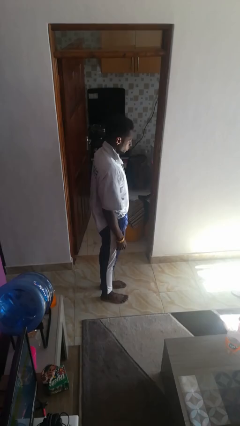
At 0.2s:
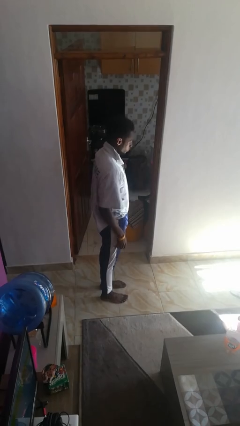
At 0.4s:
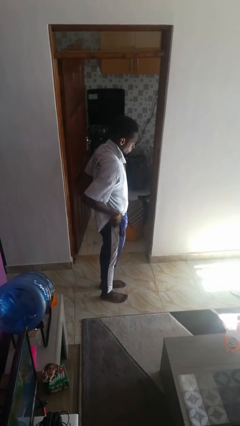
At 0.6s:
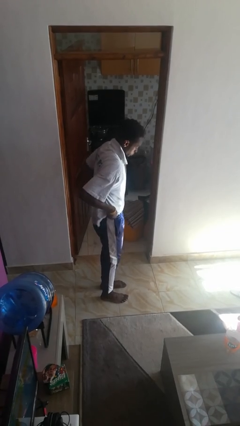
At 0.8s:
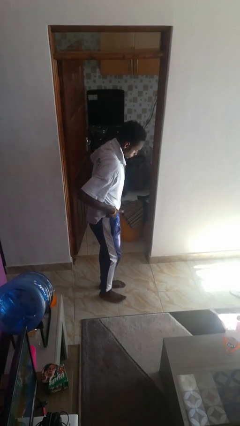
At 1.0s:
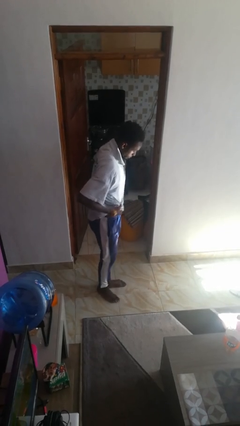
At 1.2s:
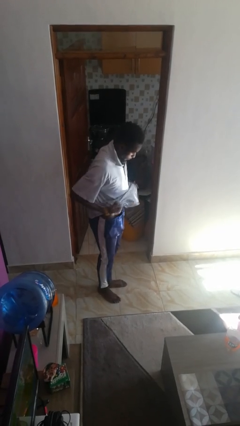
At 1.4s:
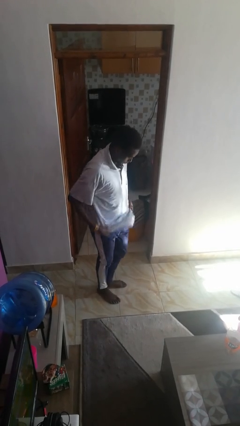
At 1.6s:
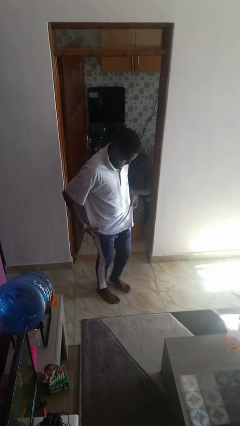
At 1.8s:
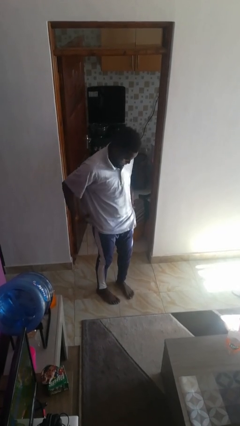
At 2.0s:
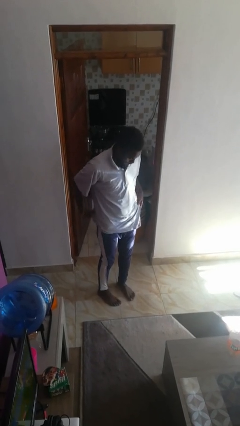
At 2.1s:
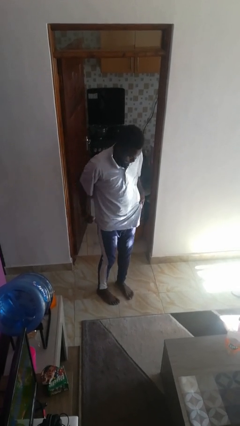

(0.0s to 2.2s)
person untucks shirt

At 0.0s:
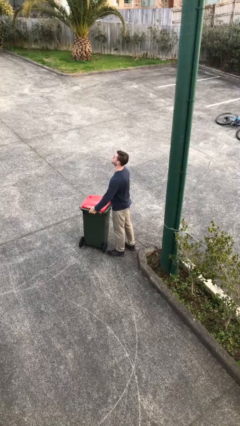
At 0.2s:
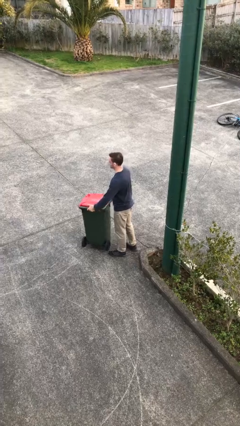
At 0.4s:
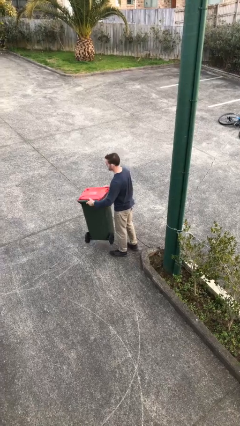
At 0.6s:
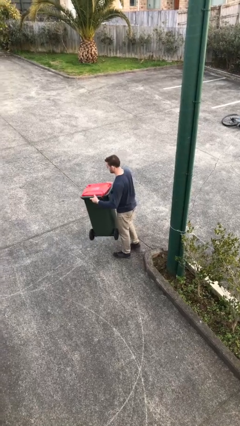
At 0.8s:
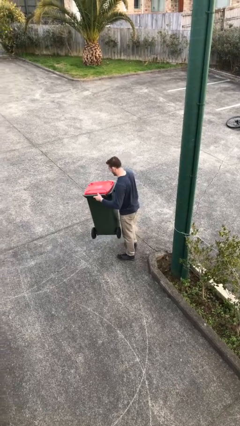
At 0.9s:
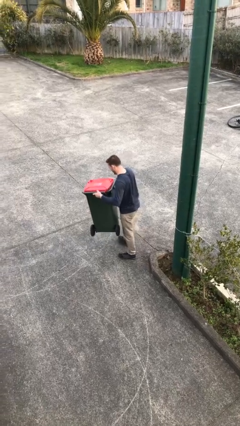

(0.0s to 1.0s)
person picks up object from floor

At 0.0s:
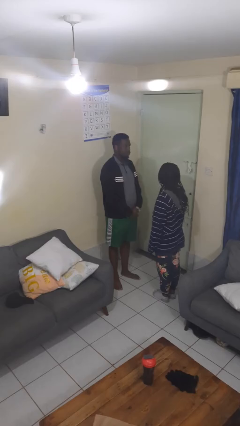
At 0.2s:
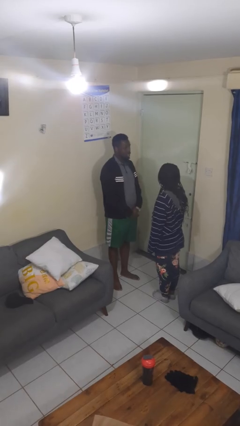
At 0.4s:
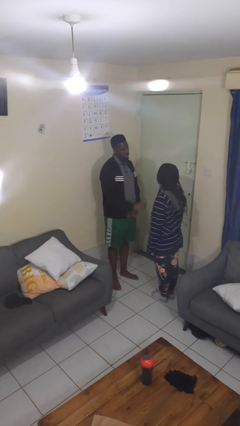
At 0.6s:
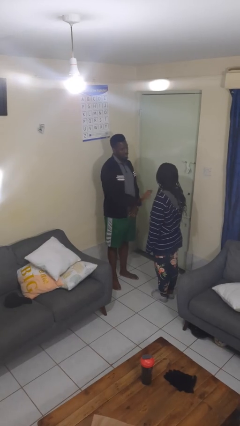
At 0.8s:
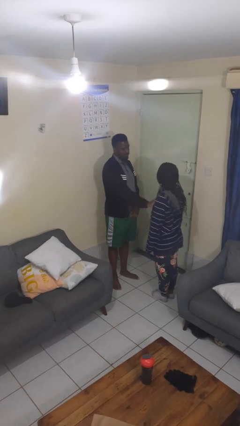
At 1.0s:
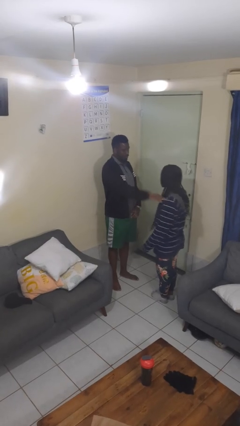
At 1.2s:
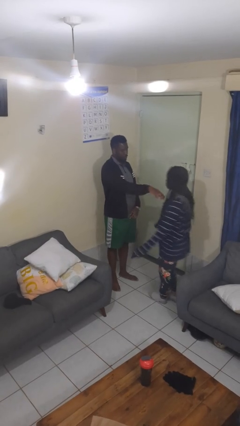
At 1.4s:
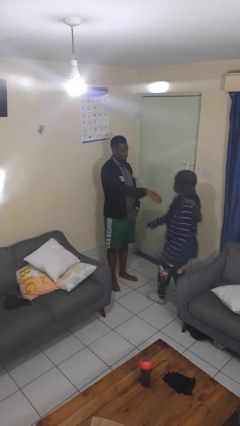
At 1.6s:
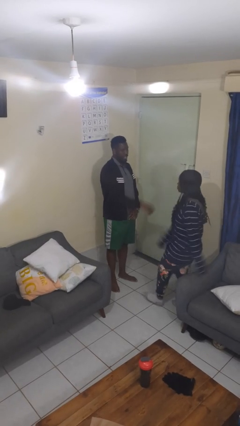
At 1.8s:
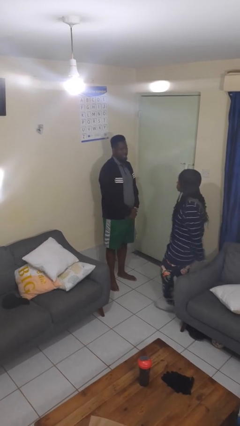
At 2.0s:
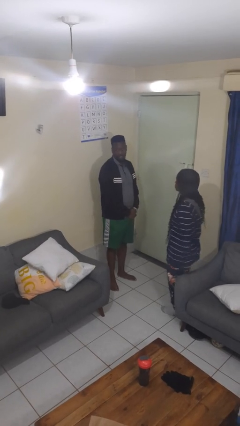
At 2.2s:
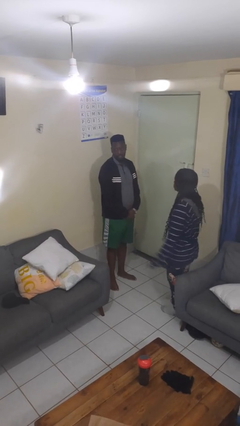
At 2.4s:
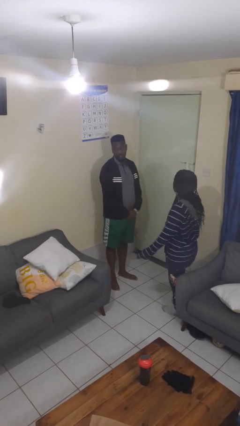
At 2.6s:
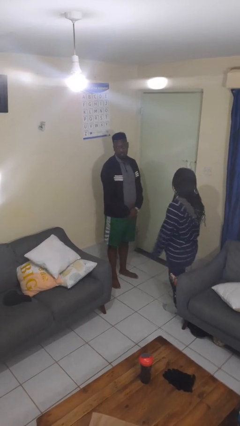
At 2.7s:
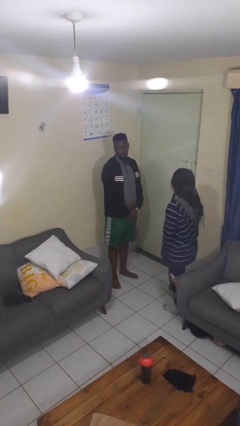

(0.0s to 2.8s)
person shoves person

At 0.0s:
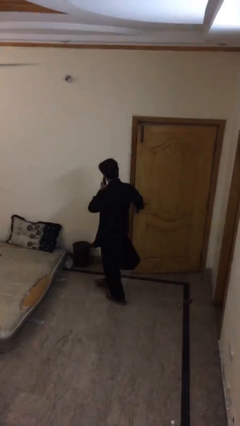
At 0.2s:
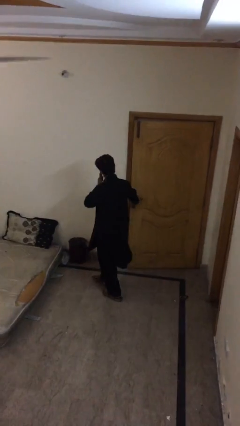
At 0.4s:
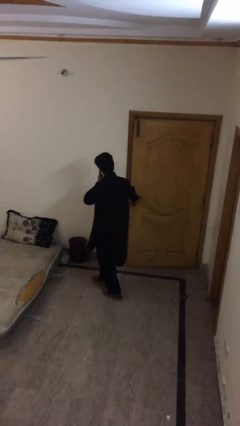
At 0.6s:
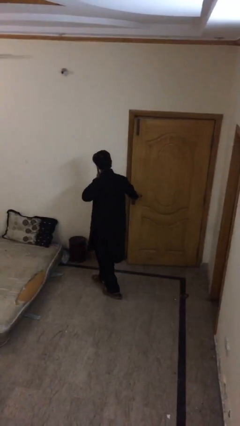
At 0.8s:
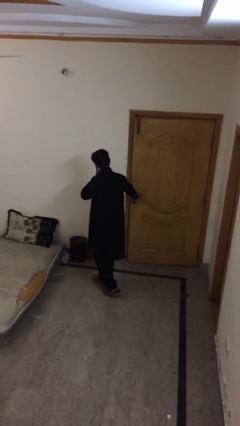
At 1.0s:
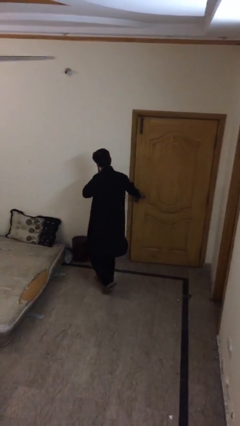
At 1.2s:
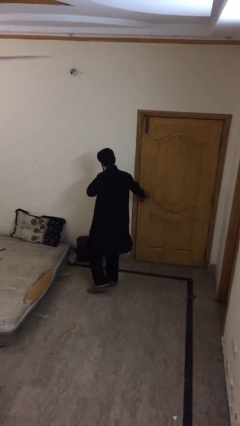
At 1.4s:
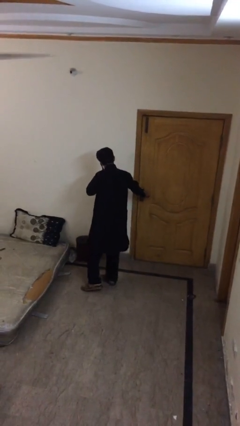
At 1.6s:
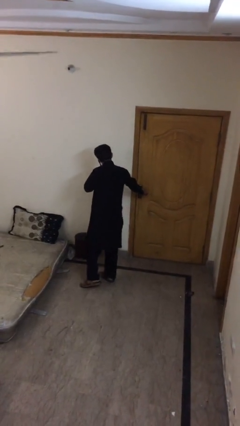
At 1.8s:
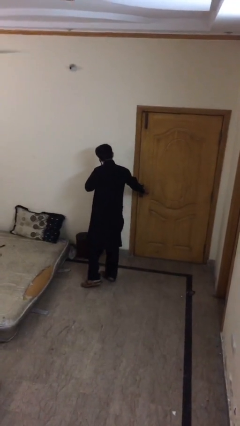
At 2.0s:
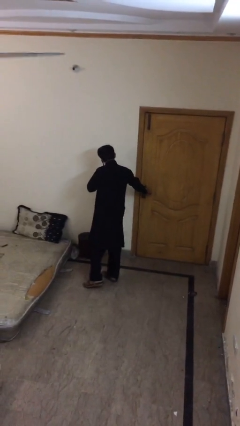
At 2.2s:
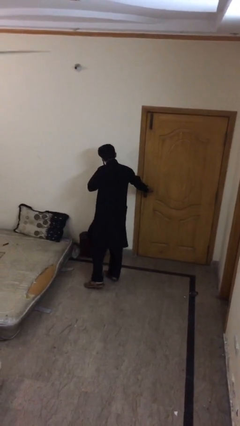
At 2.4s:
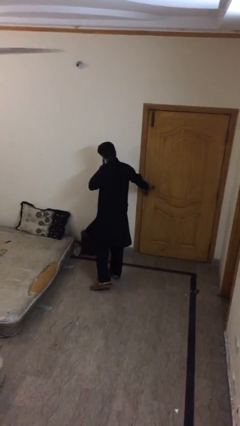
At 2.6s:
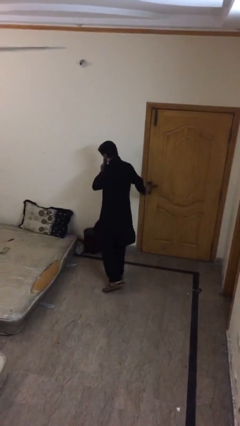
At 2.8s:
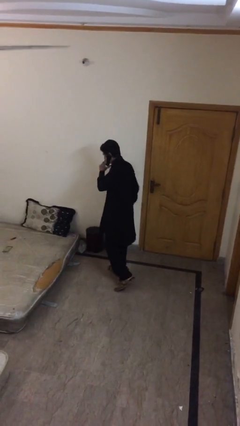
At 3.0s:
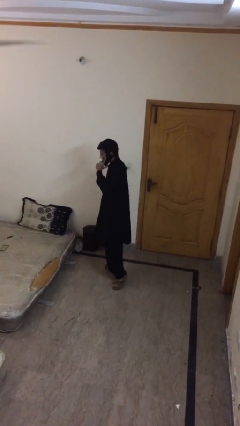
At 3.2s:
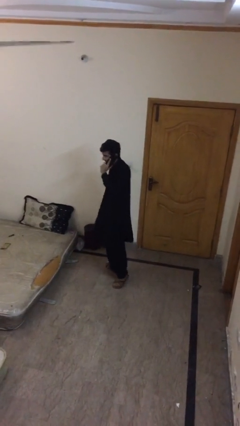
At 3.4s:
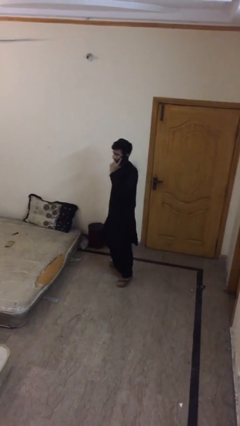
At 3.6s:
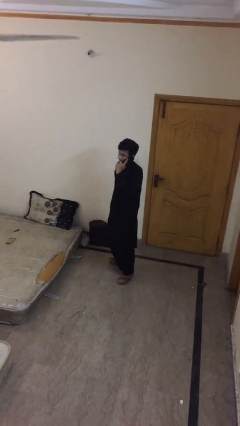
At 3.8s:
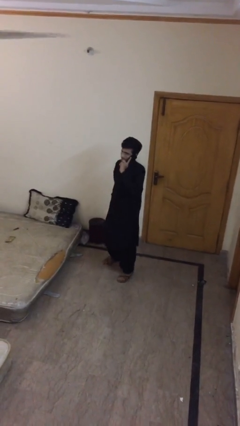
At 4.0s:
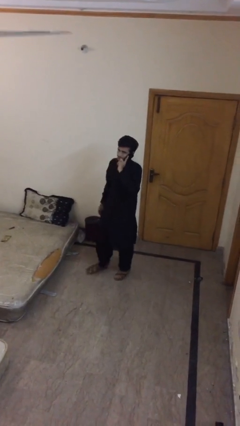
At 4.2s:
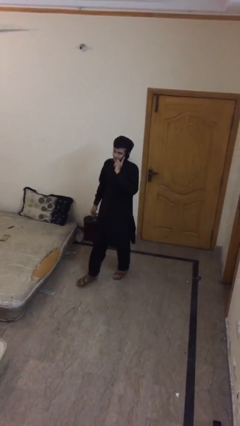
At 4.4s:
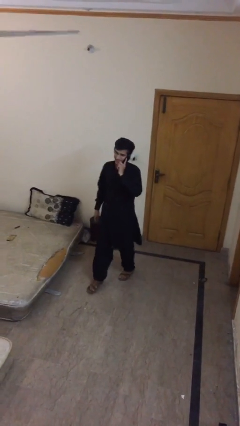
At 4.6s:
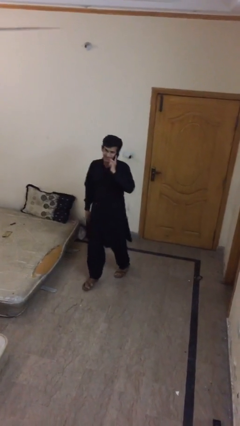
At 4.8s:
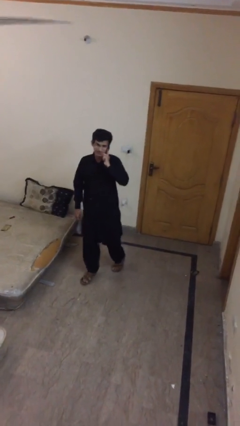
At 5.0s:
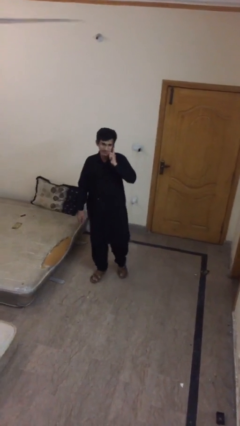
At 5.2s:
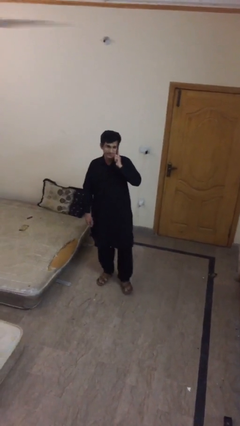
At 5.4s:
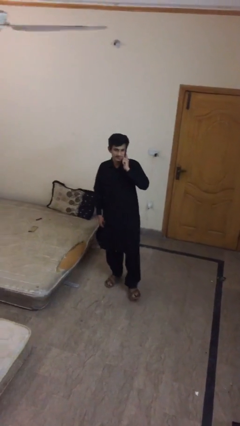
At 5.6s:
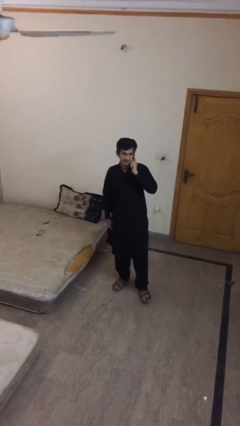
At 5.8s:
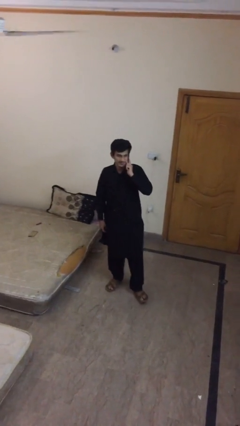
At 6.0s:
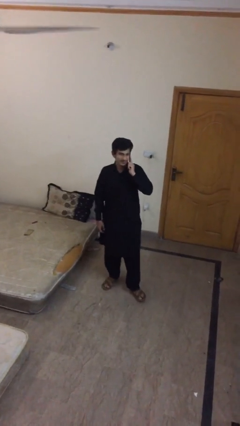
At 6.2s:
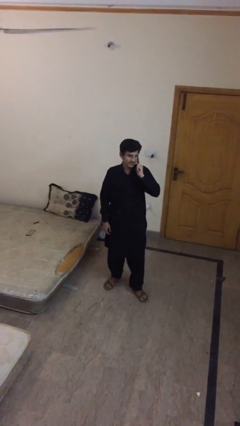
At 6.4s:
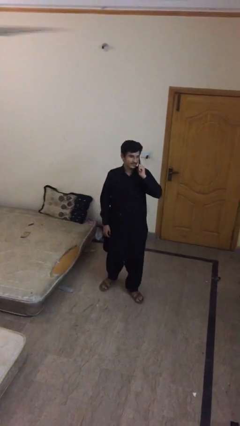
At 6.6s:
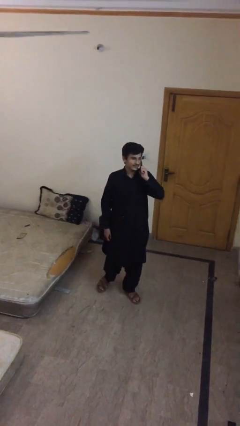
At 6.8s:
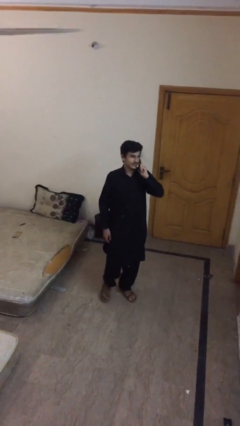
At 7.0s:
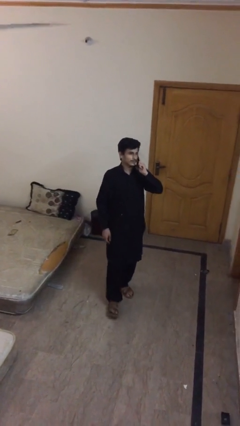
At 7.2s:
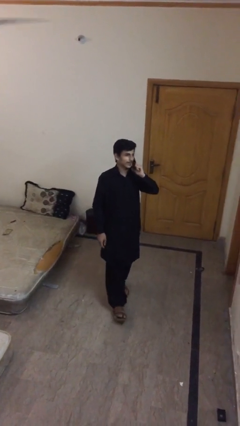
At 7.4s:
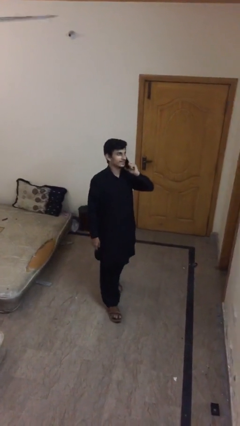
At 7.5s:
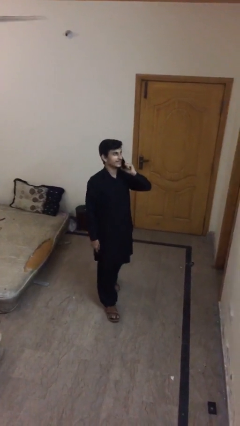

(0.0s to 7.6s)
person closes facility door

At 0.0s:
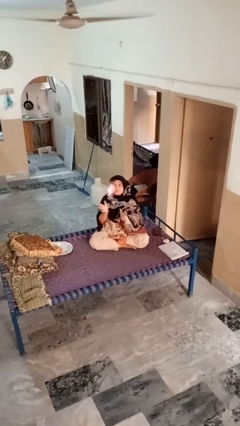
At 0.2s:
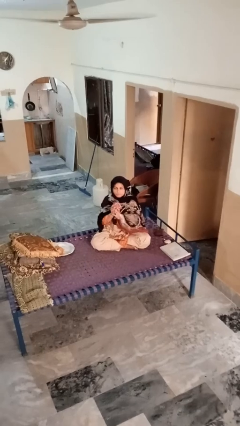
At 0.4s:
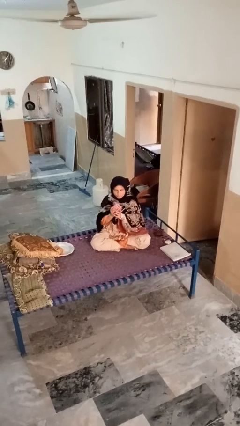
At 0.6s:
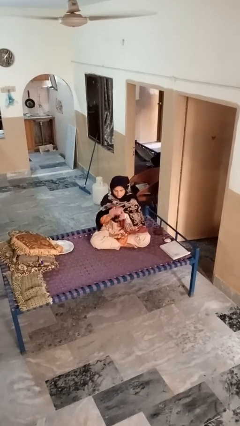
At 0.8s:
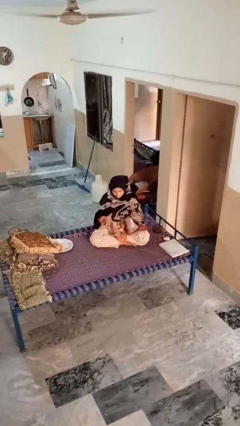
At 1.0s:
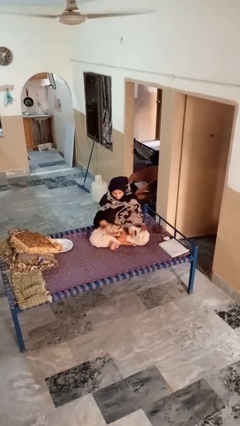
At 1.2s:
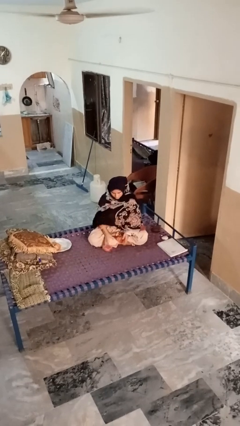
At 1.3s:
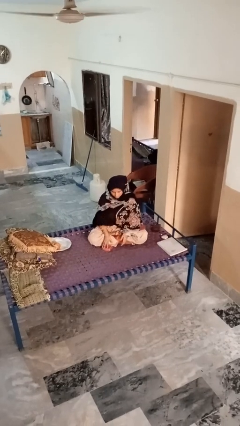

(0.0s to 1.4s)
person catches dropped object

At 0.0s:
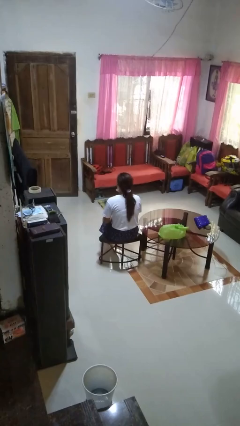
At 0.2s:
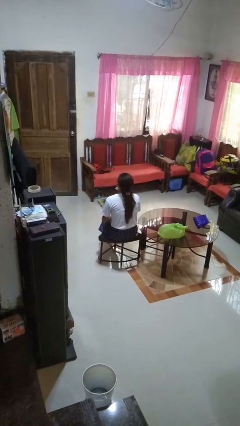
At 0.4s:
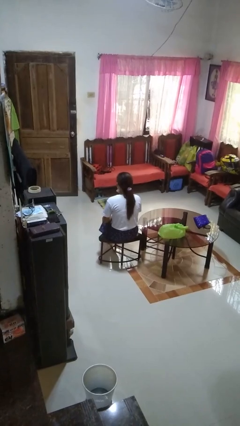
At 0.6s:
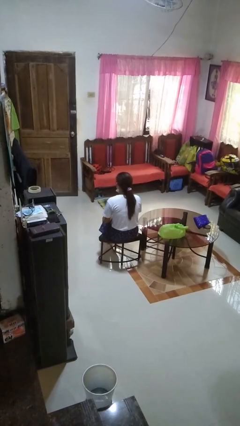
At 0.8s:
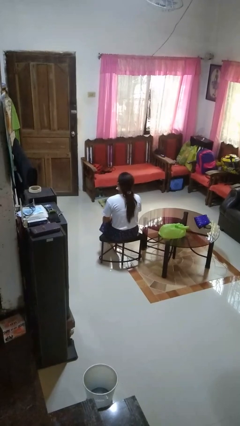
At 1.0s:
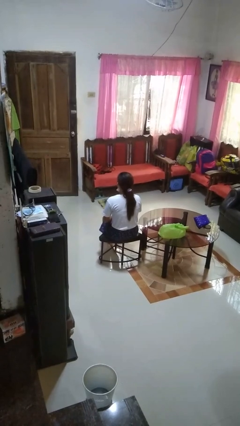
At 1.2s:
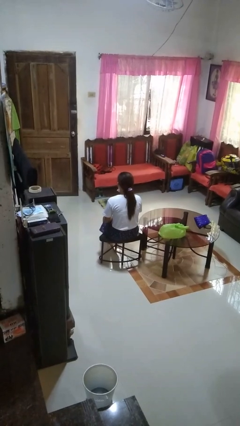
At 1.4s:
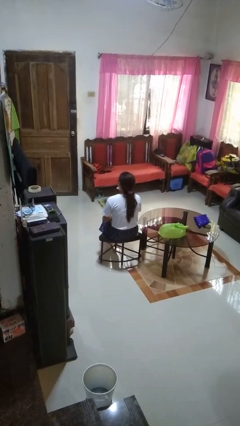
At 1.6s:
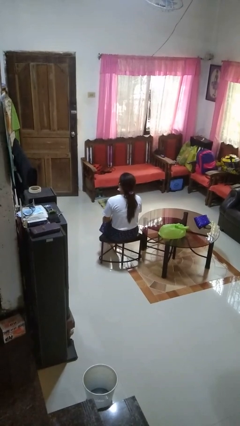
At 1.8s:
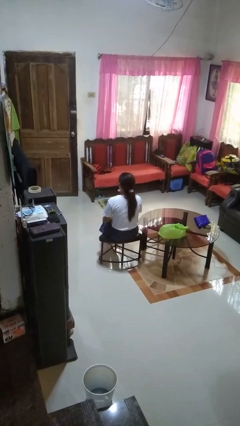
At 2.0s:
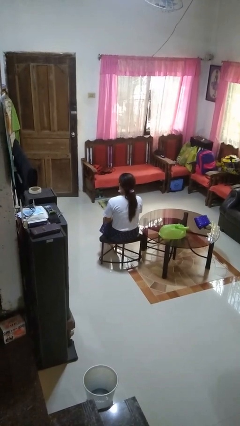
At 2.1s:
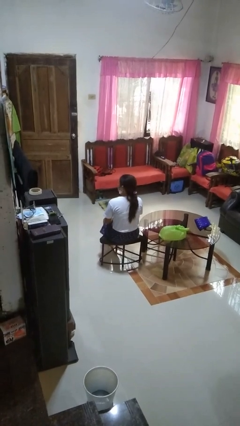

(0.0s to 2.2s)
person nods head

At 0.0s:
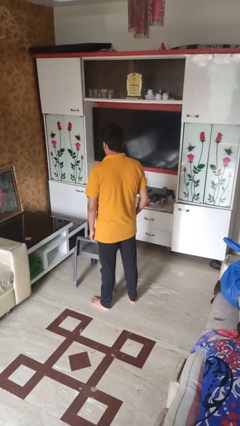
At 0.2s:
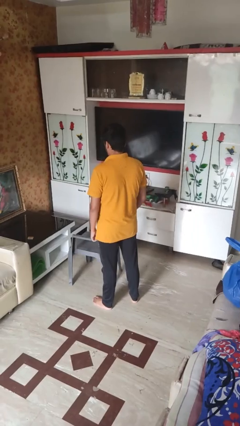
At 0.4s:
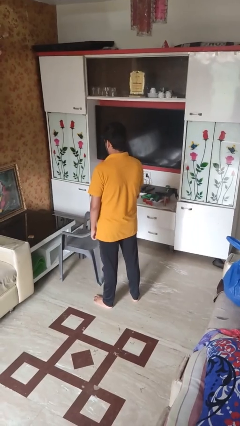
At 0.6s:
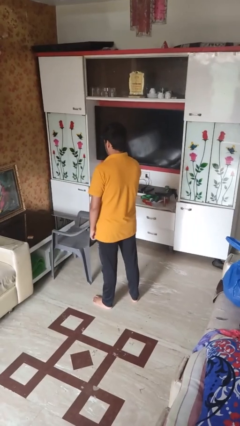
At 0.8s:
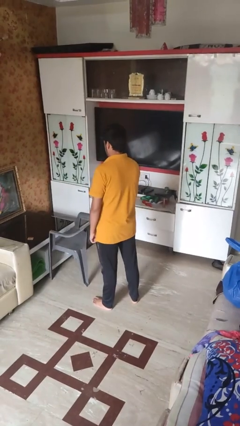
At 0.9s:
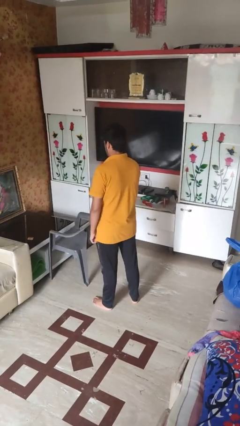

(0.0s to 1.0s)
person pushes in chair
